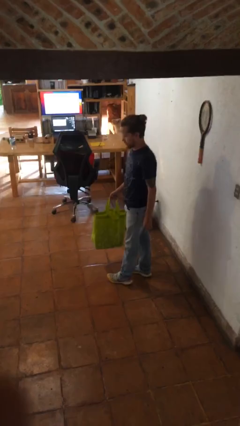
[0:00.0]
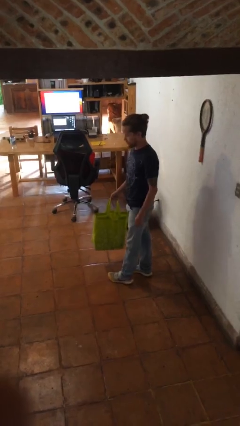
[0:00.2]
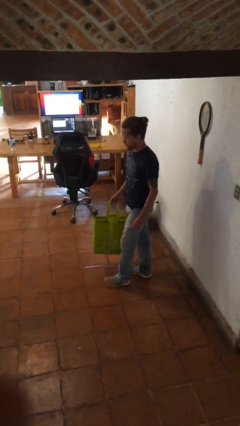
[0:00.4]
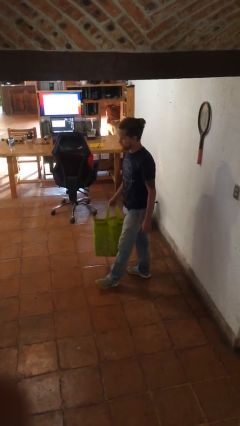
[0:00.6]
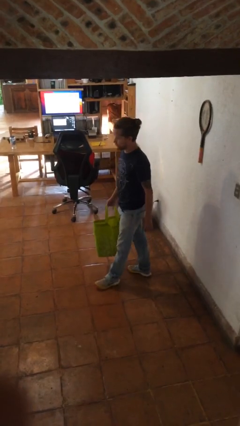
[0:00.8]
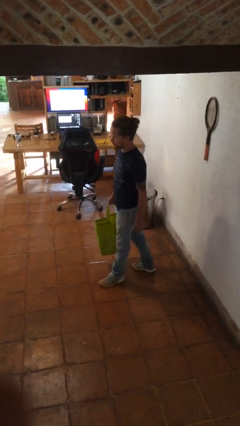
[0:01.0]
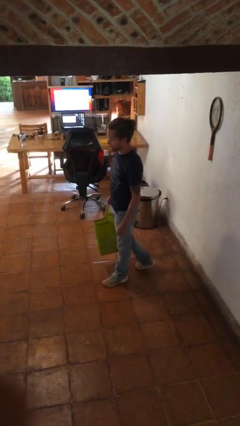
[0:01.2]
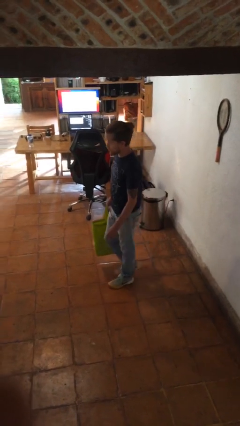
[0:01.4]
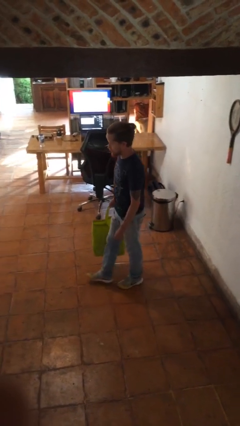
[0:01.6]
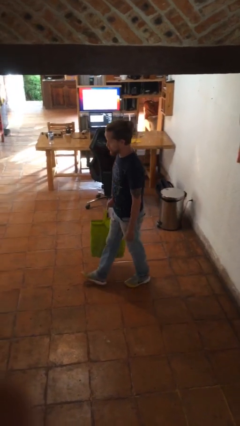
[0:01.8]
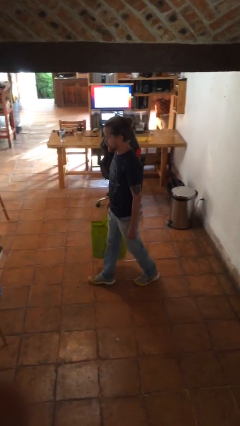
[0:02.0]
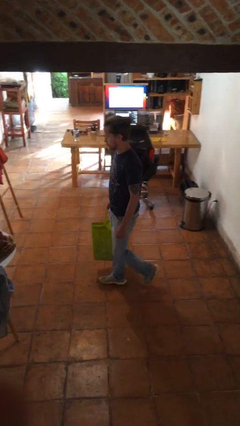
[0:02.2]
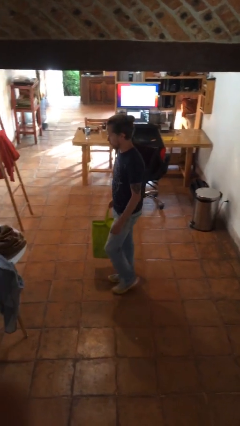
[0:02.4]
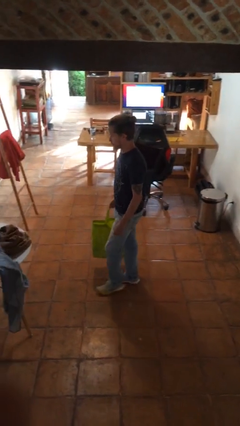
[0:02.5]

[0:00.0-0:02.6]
person carries groceries

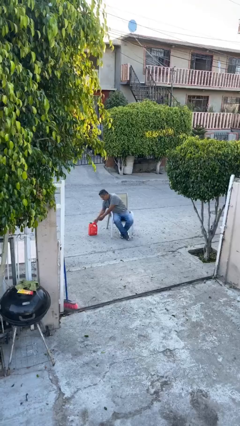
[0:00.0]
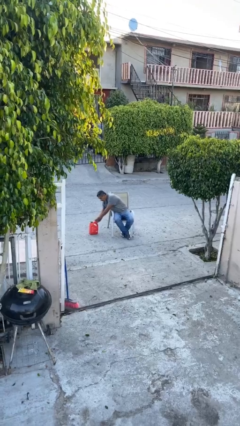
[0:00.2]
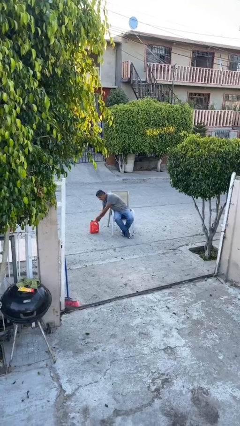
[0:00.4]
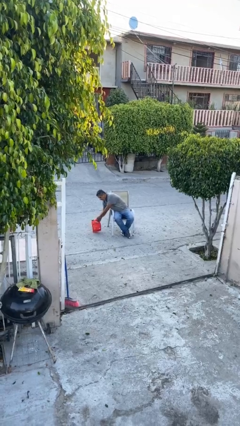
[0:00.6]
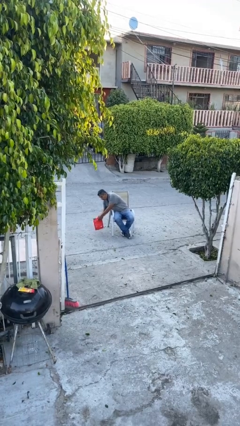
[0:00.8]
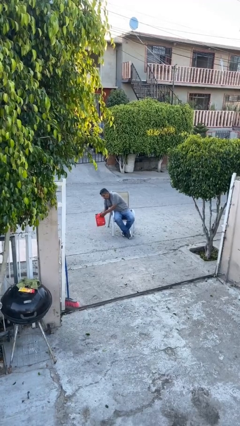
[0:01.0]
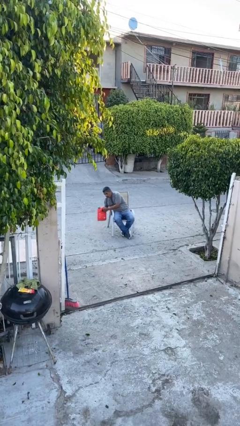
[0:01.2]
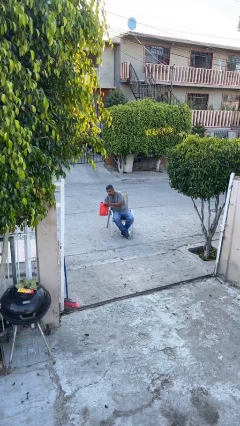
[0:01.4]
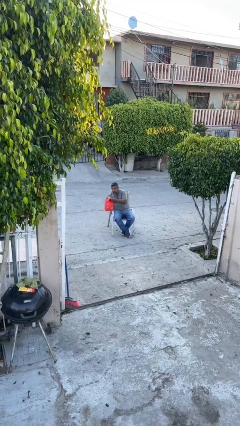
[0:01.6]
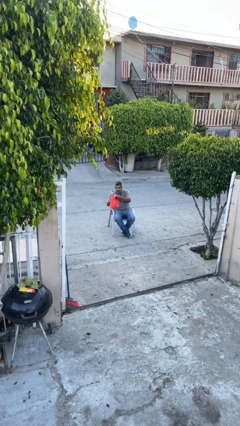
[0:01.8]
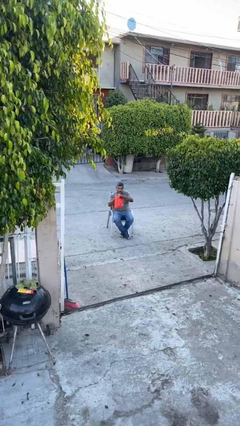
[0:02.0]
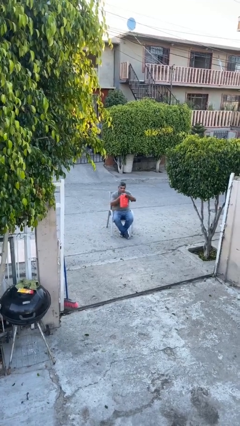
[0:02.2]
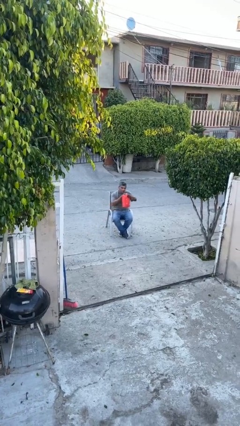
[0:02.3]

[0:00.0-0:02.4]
person picks up object from floor

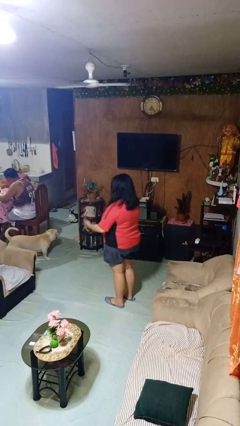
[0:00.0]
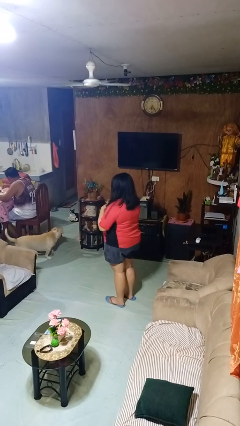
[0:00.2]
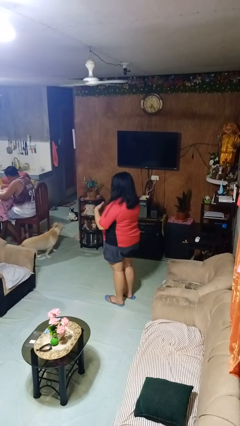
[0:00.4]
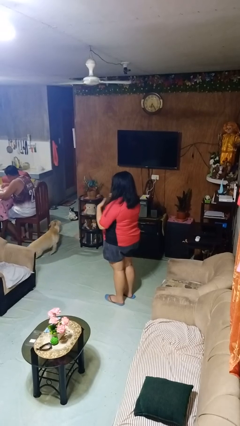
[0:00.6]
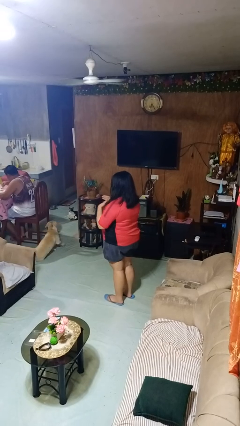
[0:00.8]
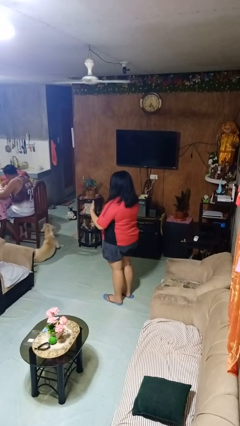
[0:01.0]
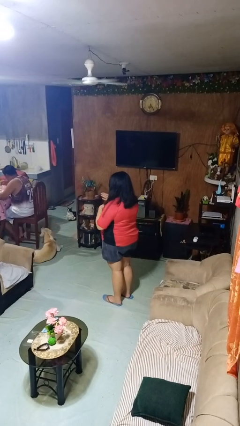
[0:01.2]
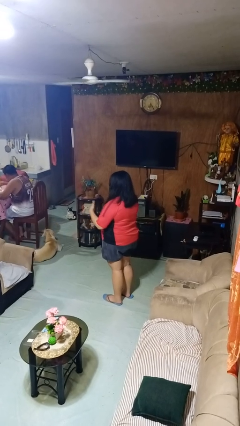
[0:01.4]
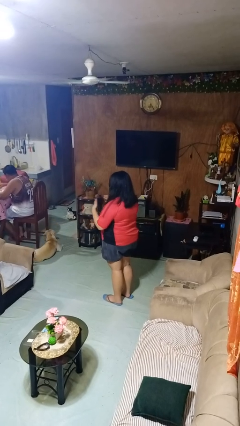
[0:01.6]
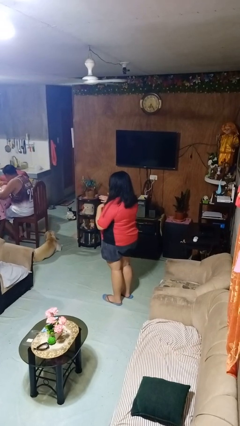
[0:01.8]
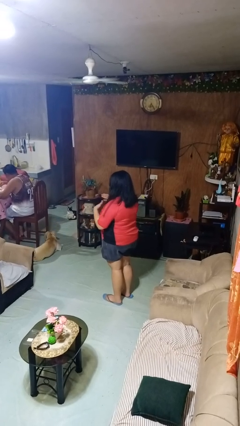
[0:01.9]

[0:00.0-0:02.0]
person drums on chest

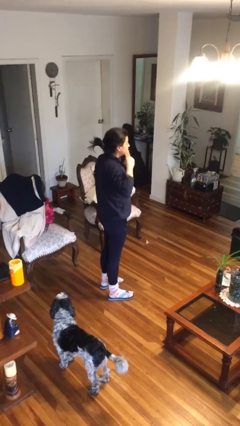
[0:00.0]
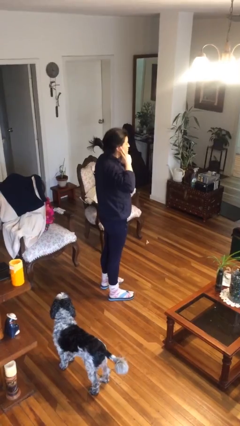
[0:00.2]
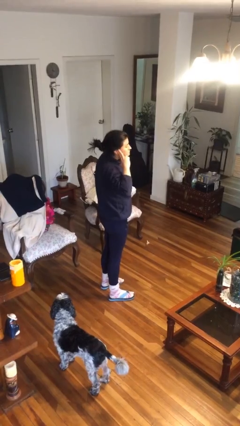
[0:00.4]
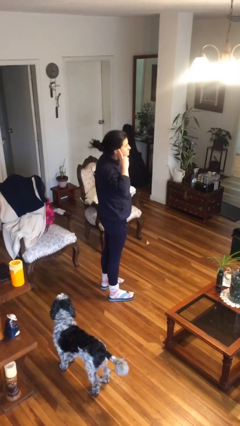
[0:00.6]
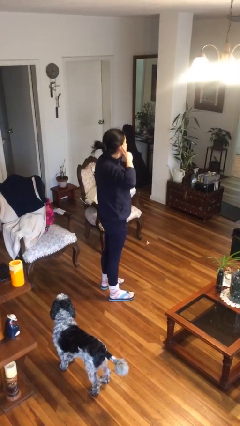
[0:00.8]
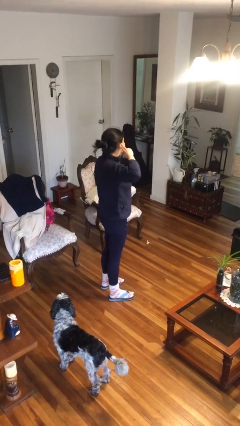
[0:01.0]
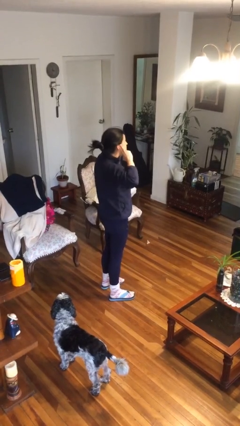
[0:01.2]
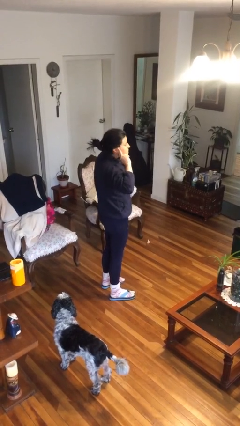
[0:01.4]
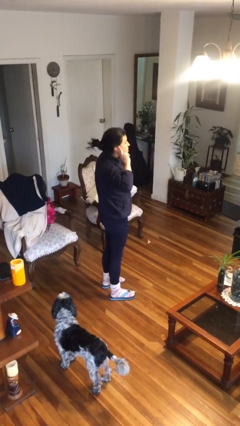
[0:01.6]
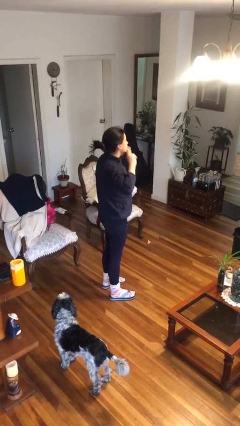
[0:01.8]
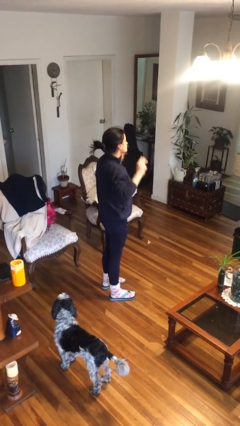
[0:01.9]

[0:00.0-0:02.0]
person puts fingers in ear

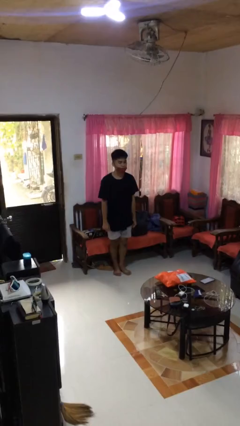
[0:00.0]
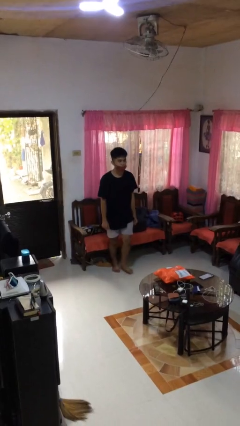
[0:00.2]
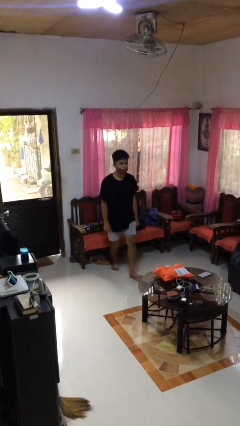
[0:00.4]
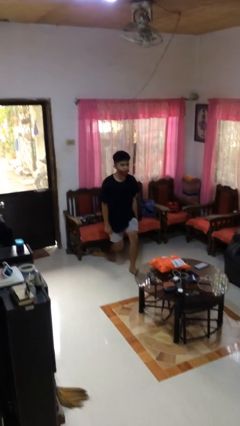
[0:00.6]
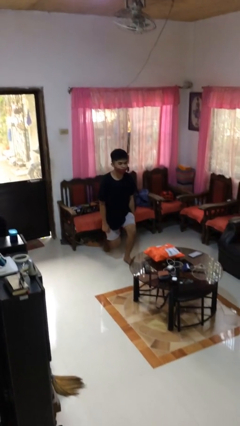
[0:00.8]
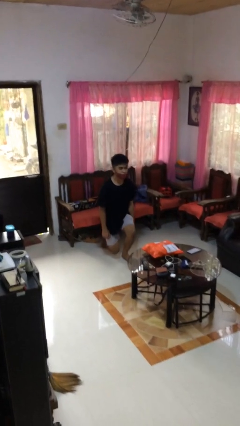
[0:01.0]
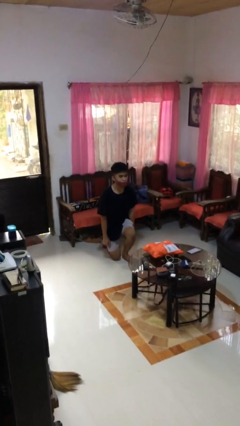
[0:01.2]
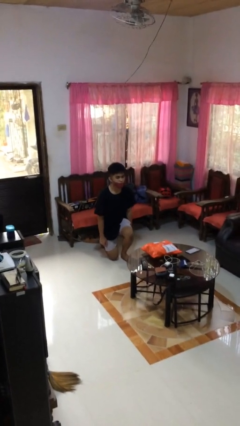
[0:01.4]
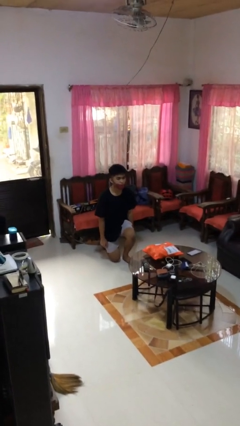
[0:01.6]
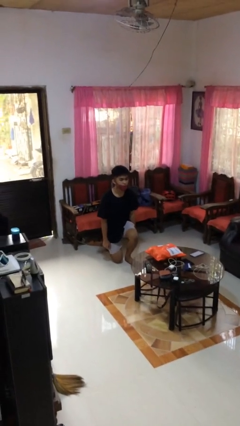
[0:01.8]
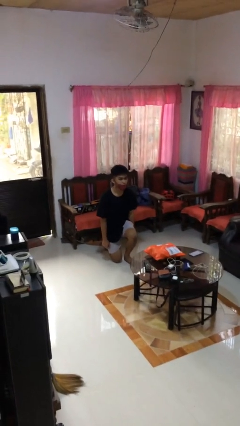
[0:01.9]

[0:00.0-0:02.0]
person kneels

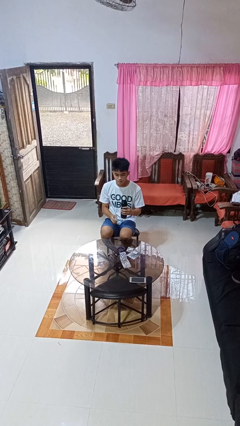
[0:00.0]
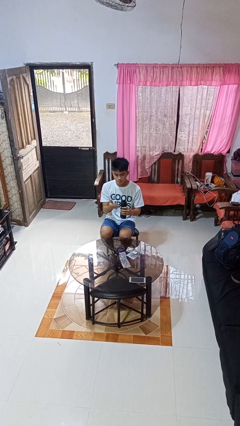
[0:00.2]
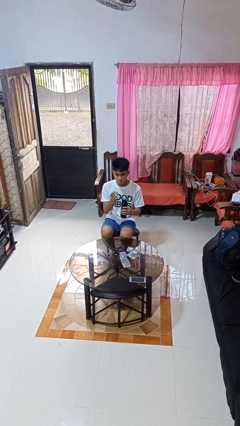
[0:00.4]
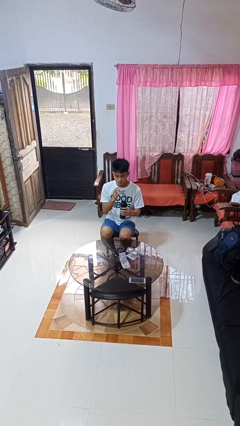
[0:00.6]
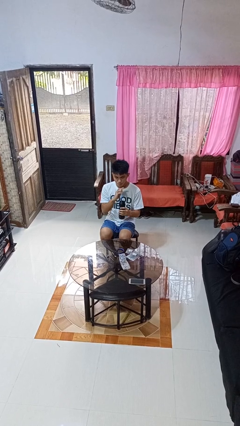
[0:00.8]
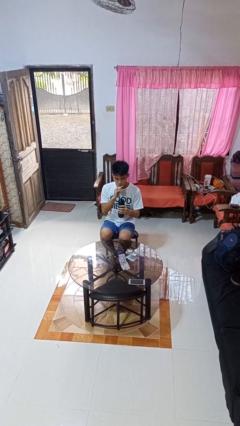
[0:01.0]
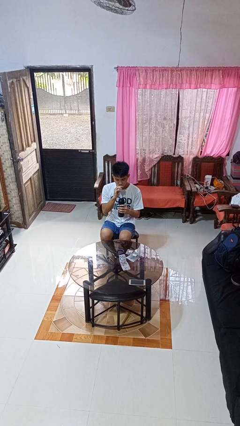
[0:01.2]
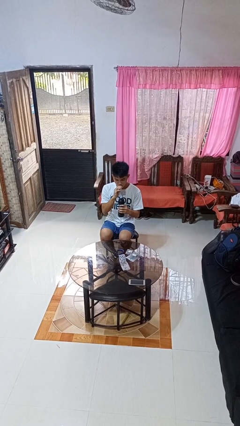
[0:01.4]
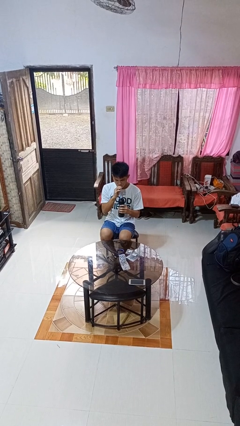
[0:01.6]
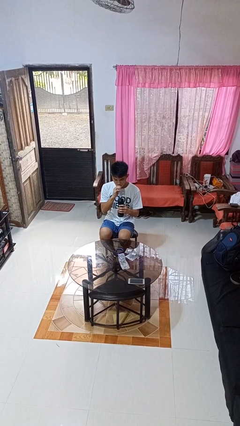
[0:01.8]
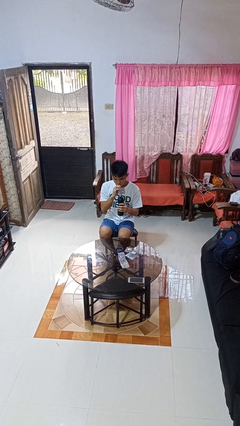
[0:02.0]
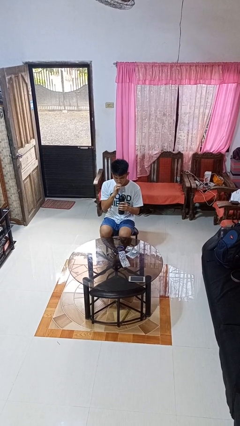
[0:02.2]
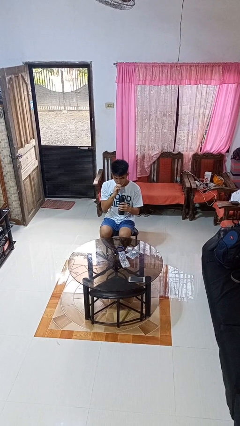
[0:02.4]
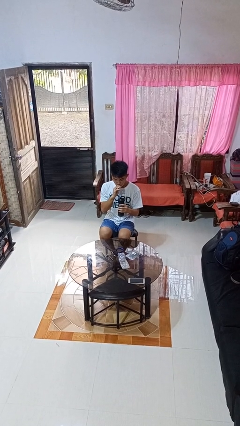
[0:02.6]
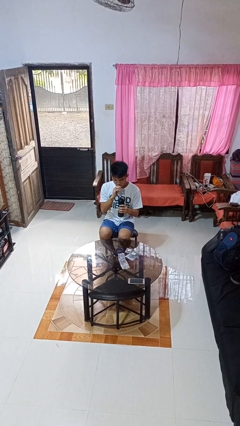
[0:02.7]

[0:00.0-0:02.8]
person drinks from straw

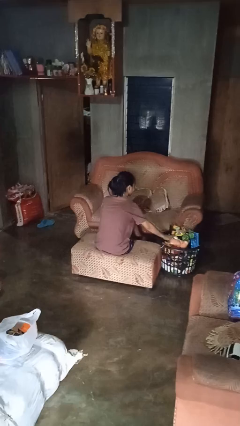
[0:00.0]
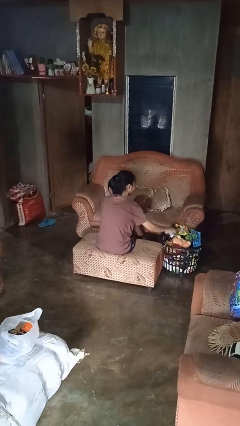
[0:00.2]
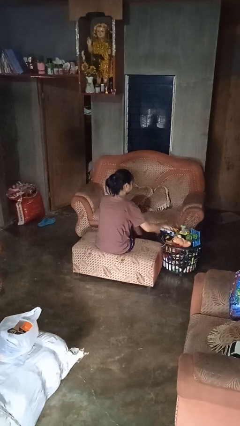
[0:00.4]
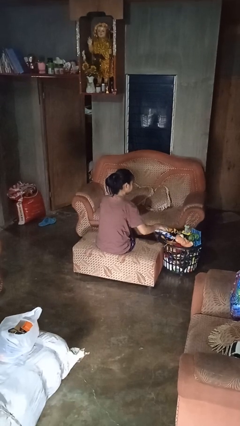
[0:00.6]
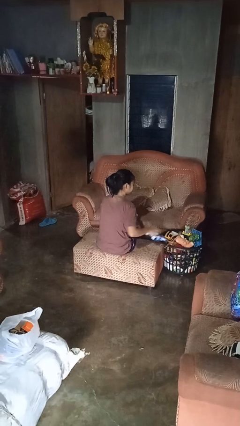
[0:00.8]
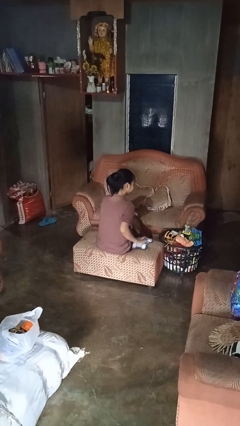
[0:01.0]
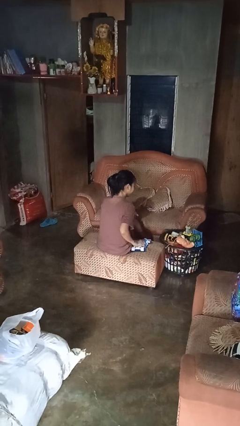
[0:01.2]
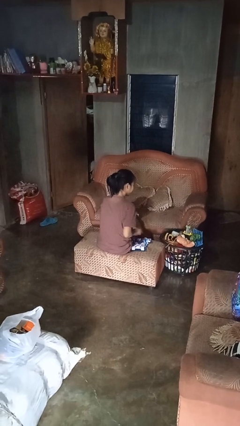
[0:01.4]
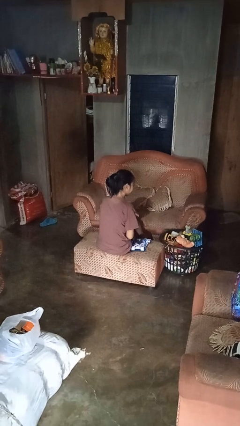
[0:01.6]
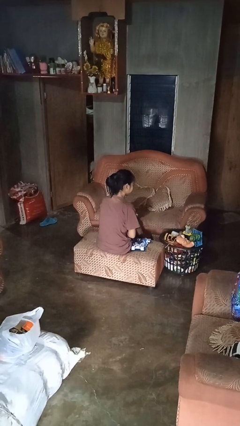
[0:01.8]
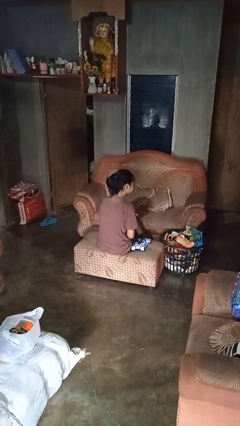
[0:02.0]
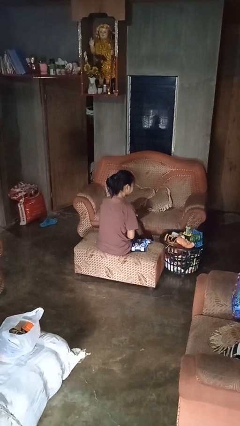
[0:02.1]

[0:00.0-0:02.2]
person takes object from basket

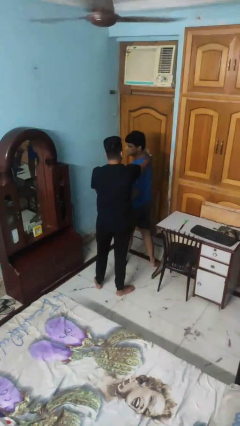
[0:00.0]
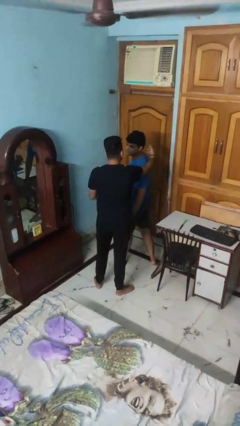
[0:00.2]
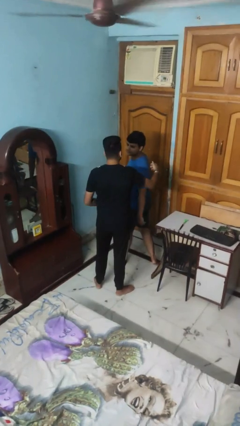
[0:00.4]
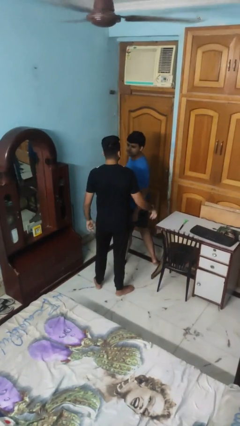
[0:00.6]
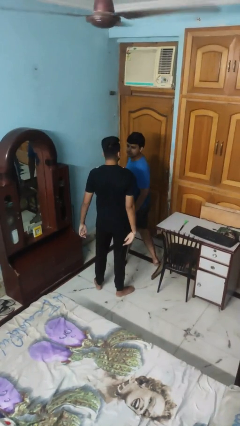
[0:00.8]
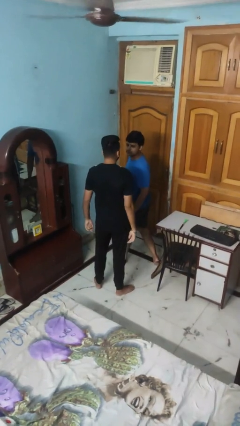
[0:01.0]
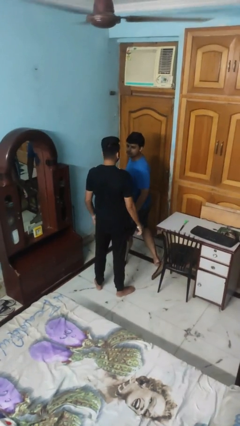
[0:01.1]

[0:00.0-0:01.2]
person spins person around
